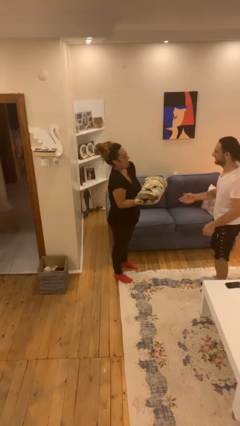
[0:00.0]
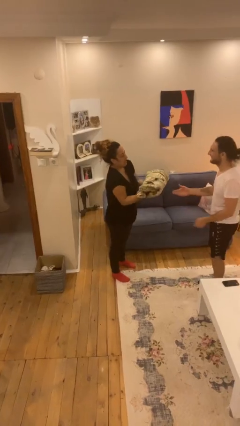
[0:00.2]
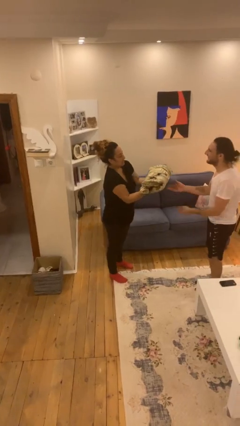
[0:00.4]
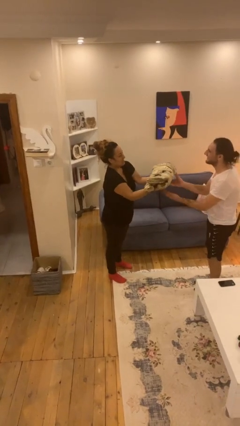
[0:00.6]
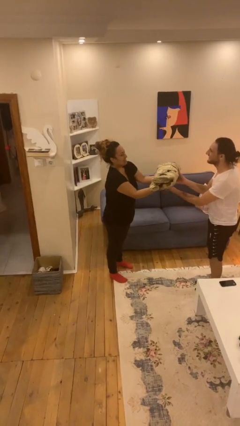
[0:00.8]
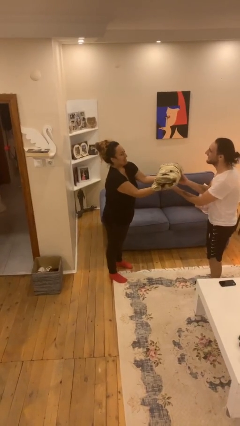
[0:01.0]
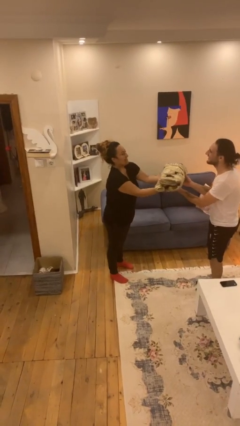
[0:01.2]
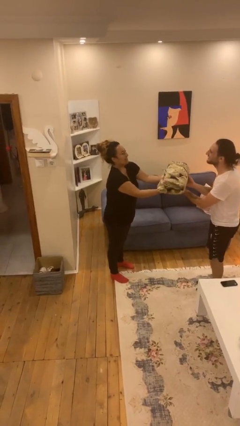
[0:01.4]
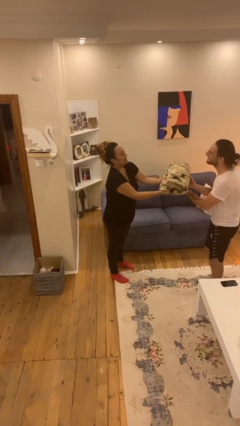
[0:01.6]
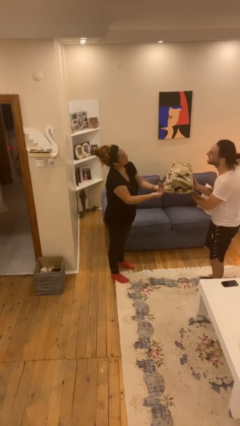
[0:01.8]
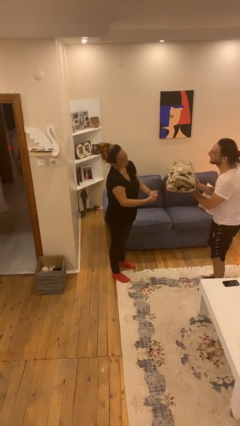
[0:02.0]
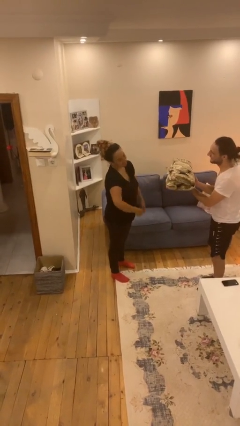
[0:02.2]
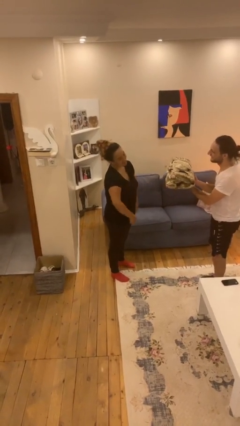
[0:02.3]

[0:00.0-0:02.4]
person transfers object to person

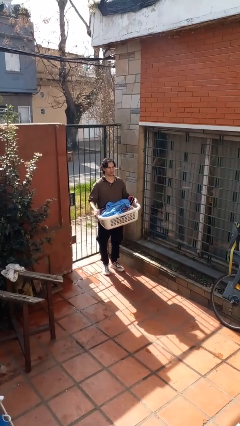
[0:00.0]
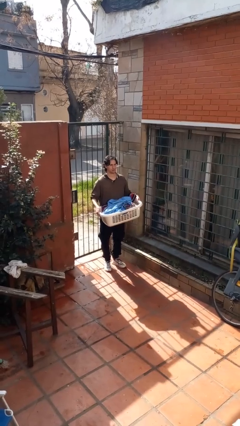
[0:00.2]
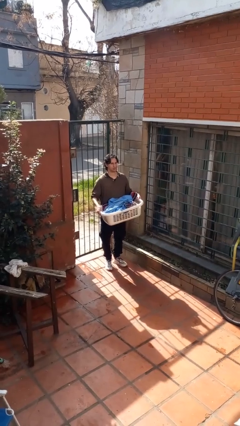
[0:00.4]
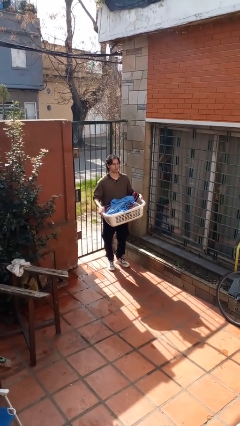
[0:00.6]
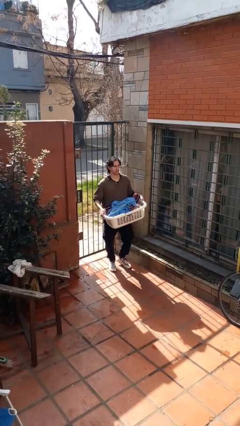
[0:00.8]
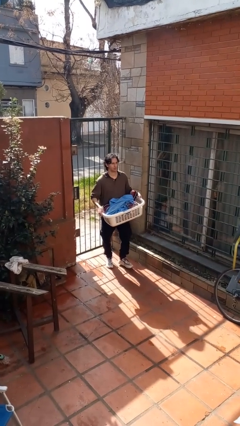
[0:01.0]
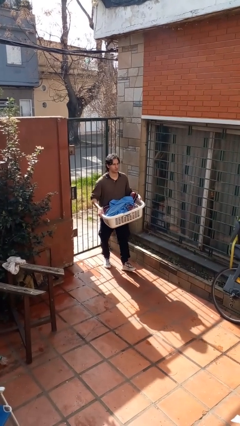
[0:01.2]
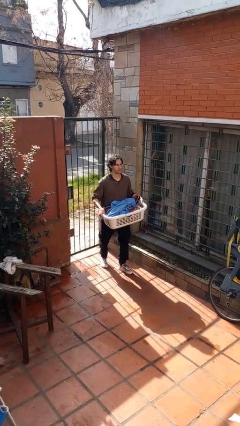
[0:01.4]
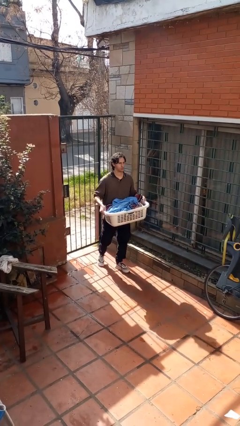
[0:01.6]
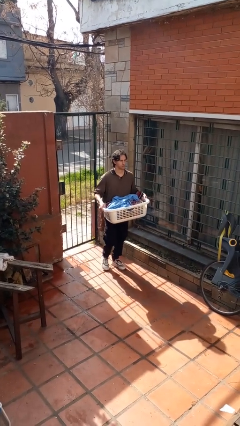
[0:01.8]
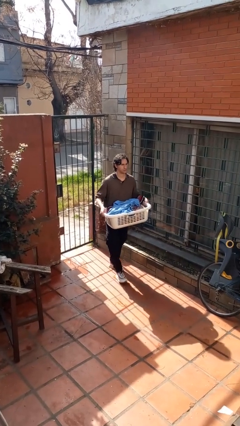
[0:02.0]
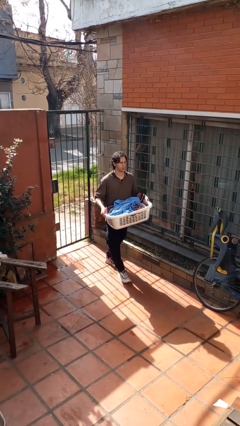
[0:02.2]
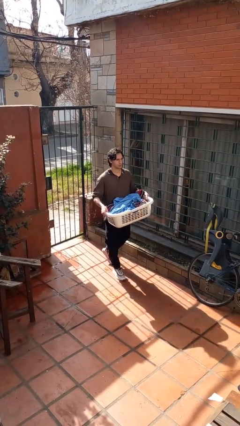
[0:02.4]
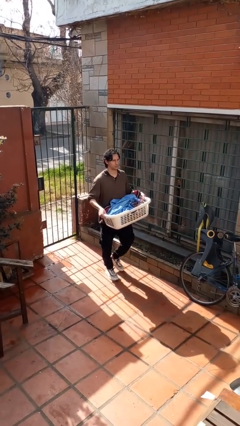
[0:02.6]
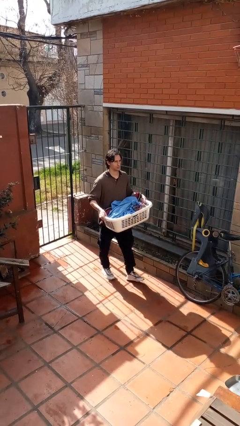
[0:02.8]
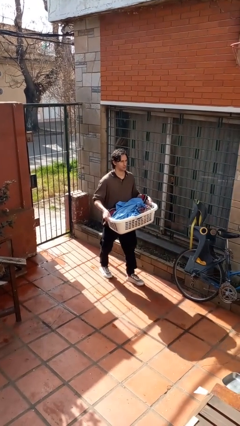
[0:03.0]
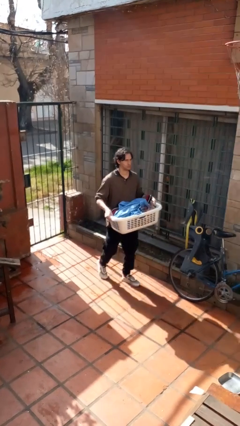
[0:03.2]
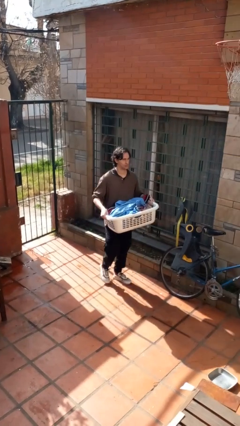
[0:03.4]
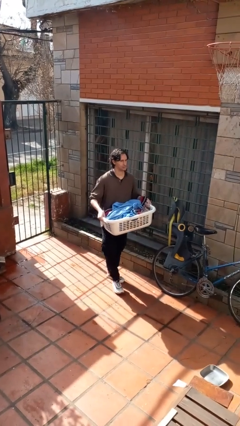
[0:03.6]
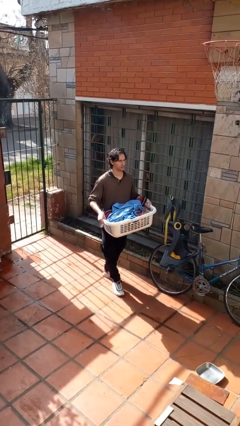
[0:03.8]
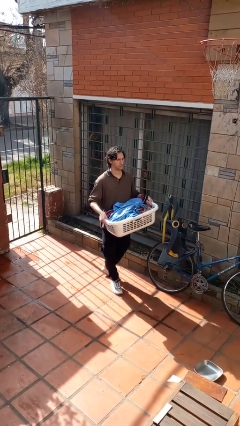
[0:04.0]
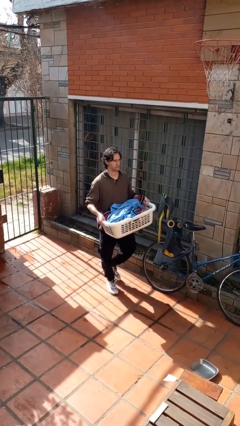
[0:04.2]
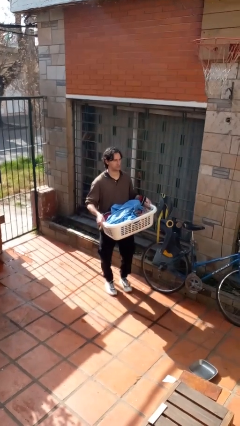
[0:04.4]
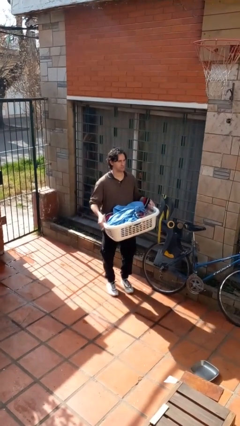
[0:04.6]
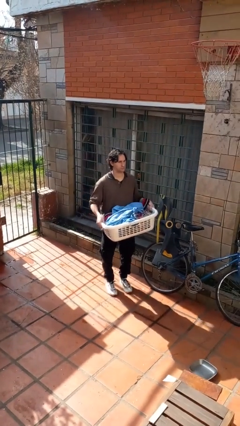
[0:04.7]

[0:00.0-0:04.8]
person carries laundry basket

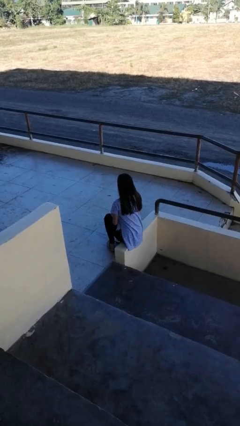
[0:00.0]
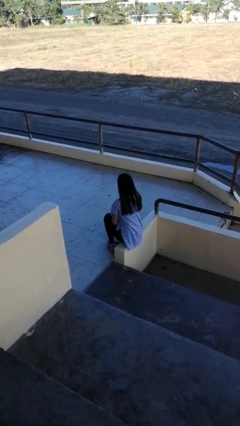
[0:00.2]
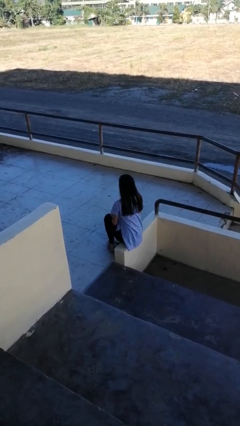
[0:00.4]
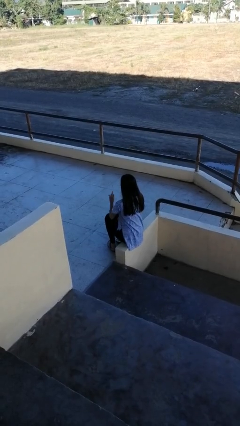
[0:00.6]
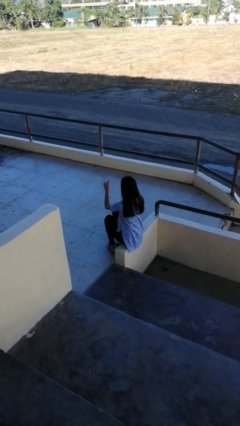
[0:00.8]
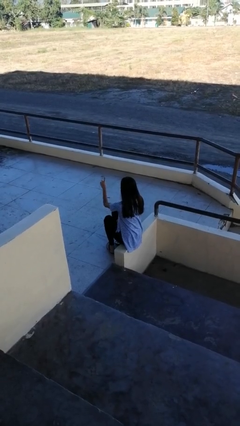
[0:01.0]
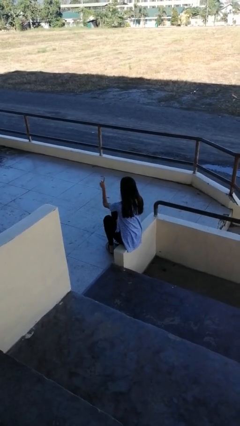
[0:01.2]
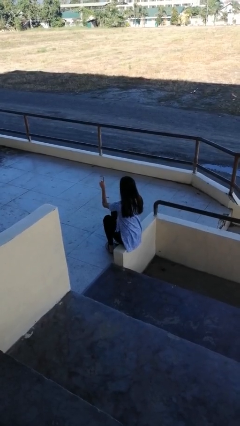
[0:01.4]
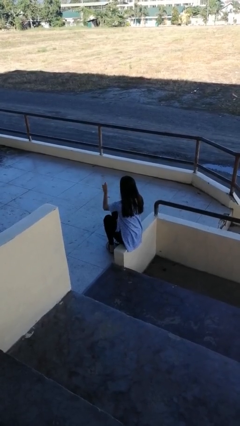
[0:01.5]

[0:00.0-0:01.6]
person gestures number one

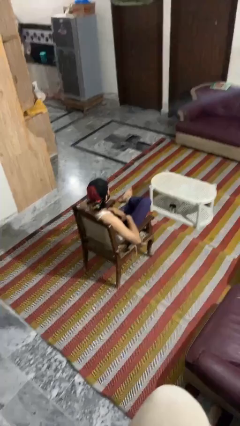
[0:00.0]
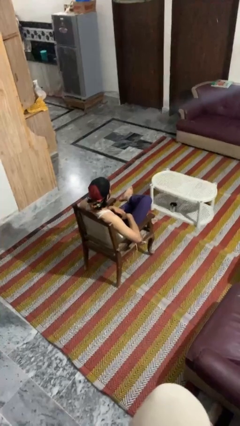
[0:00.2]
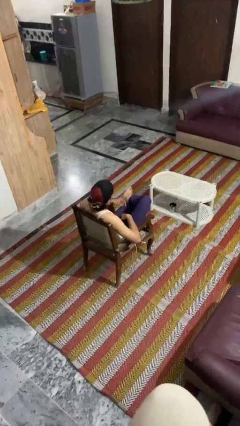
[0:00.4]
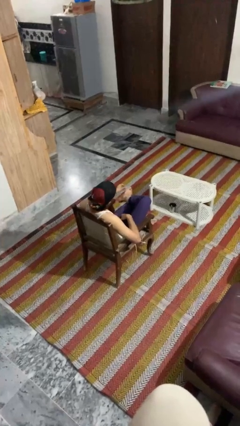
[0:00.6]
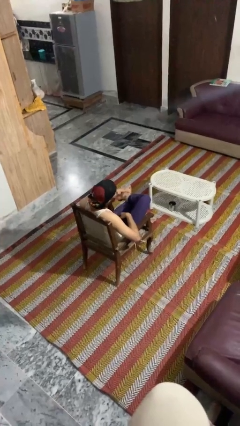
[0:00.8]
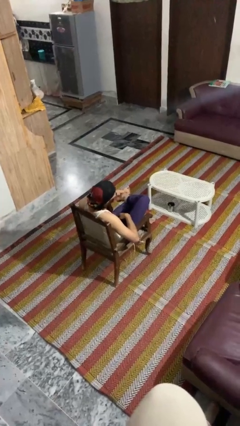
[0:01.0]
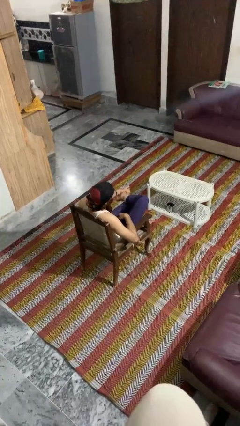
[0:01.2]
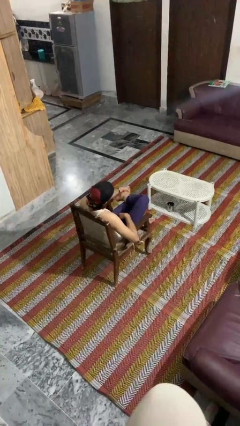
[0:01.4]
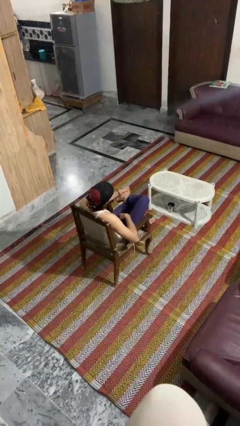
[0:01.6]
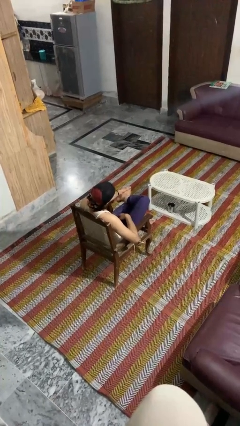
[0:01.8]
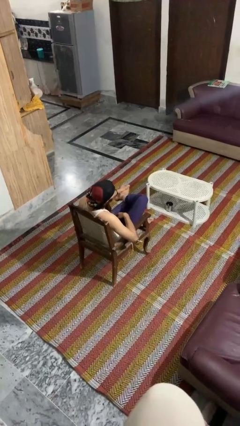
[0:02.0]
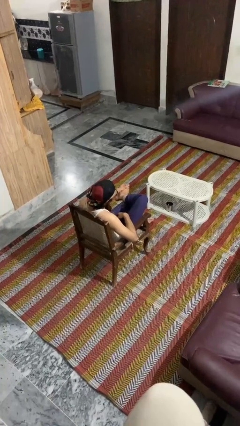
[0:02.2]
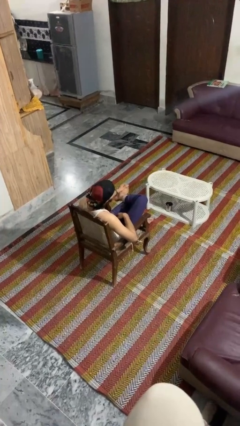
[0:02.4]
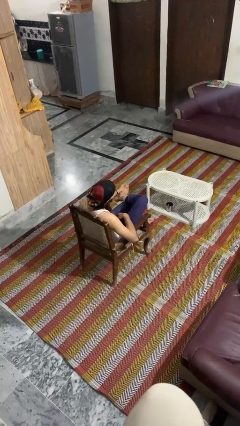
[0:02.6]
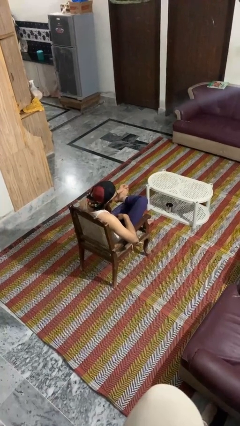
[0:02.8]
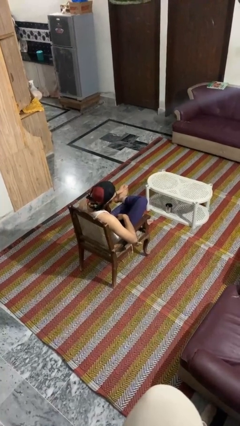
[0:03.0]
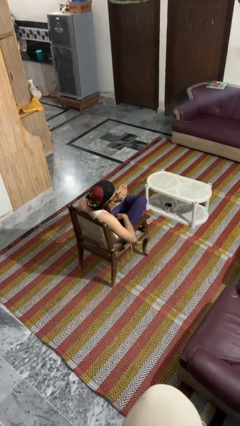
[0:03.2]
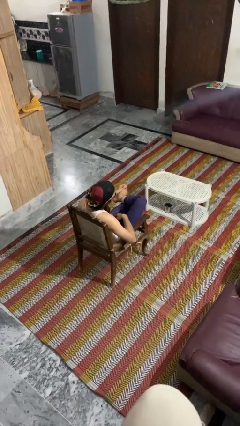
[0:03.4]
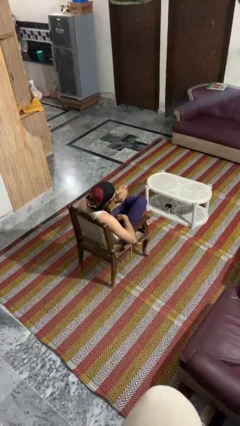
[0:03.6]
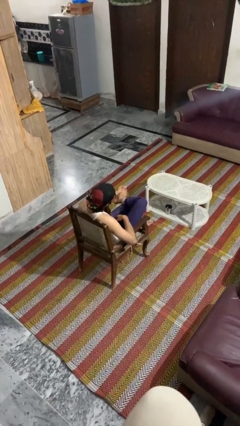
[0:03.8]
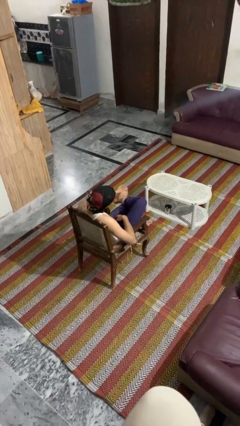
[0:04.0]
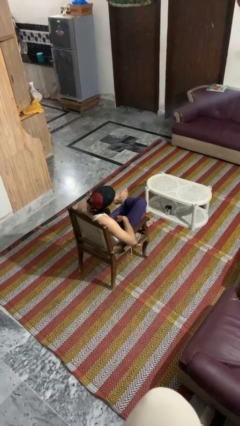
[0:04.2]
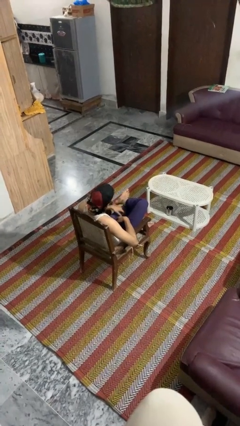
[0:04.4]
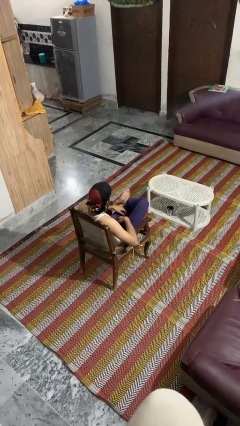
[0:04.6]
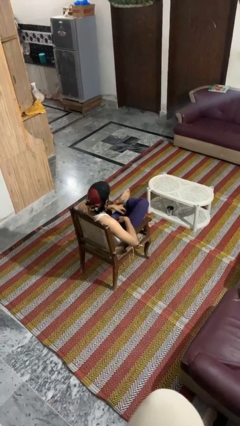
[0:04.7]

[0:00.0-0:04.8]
person rubs foot

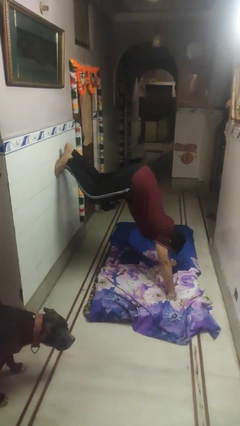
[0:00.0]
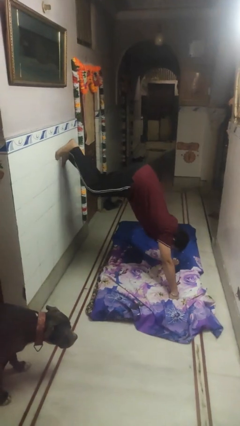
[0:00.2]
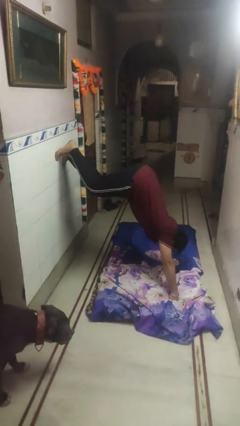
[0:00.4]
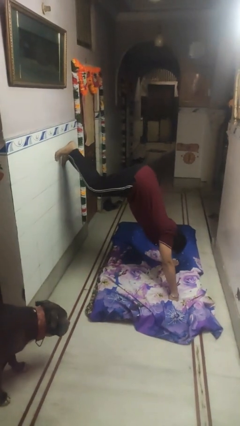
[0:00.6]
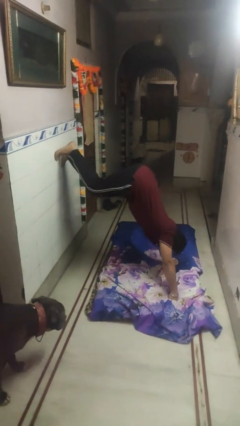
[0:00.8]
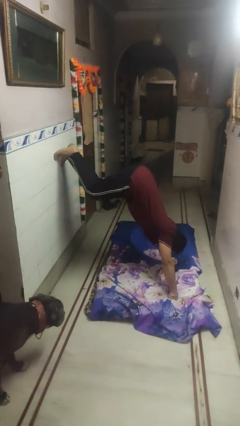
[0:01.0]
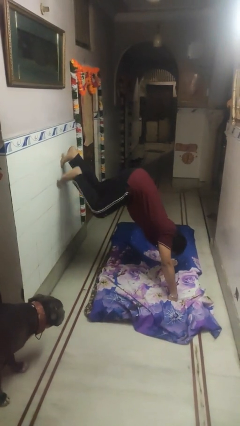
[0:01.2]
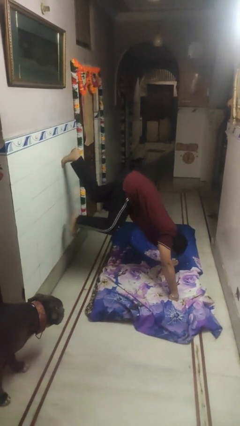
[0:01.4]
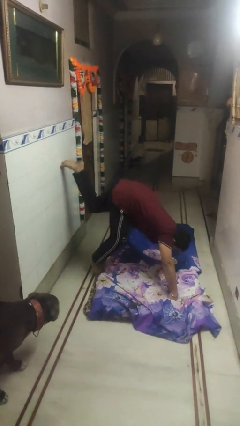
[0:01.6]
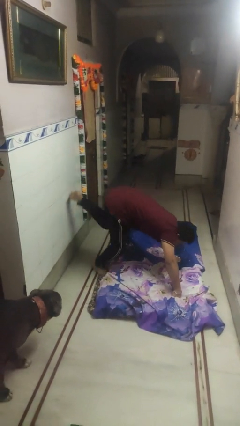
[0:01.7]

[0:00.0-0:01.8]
person handstand

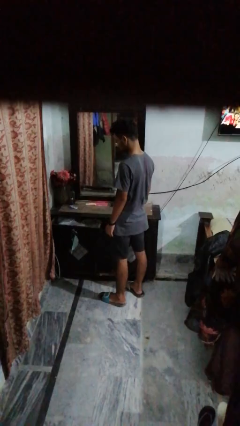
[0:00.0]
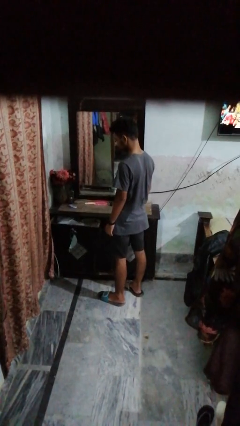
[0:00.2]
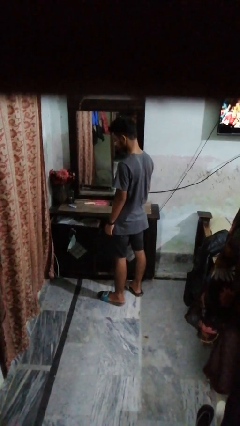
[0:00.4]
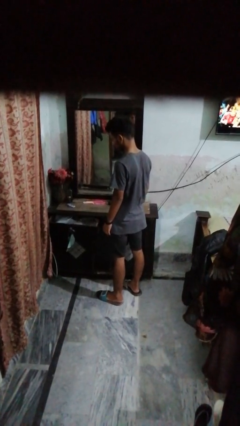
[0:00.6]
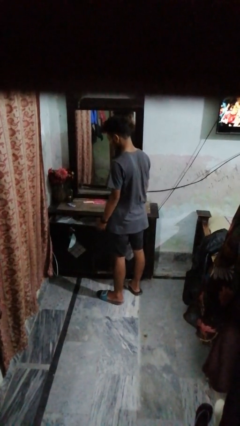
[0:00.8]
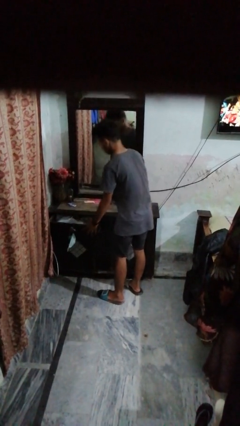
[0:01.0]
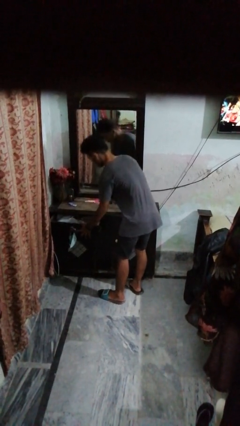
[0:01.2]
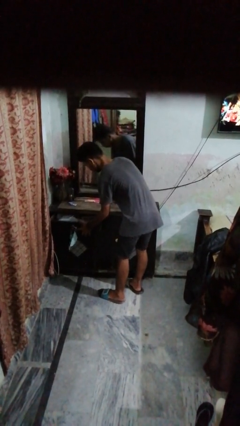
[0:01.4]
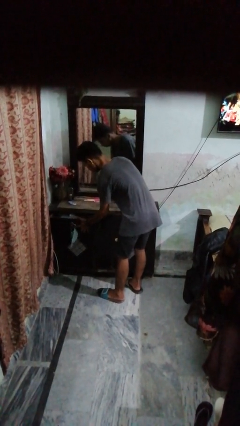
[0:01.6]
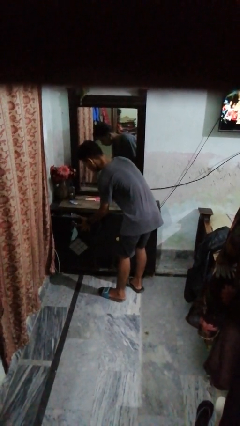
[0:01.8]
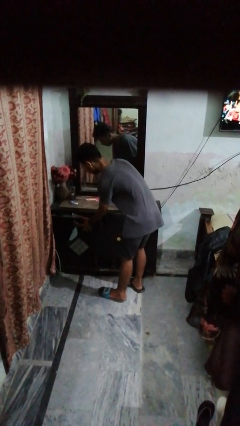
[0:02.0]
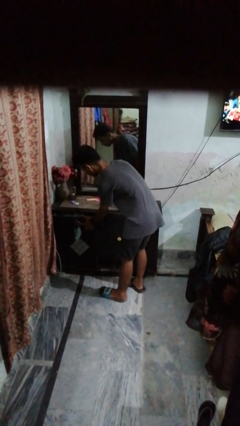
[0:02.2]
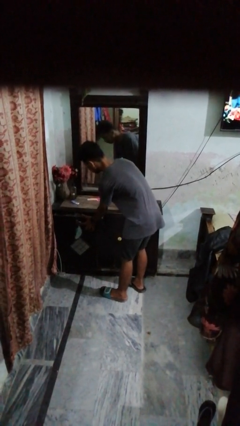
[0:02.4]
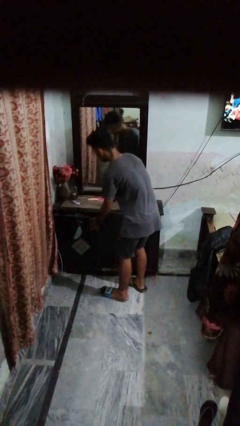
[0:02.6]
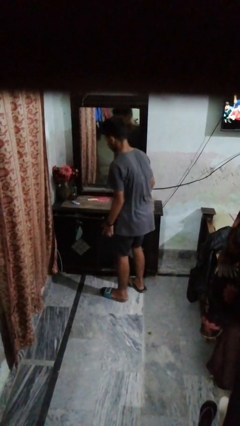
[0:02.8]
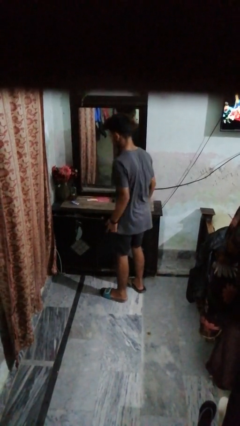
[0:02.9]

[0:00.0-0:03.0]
person closes dresser drawer
